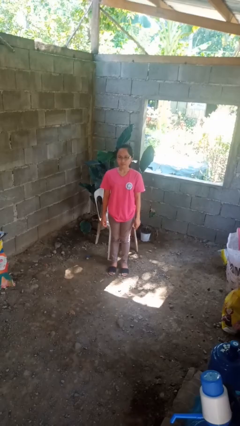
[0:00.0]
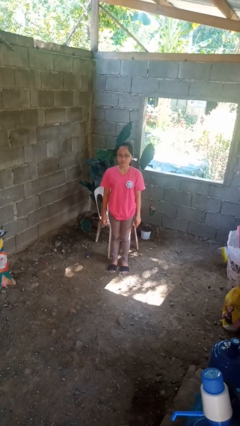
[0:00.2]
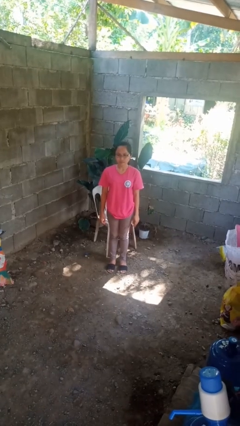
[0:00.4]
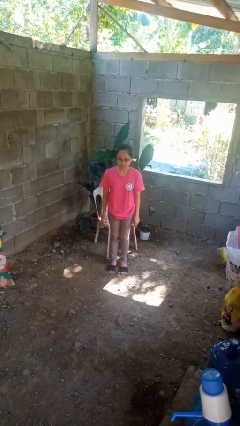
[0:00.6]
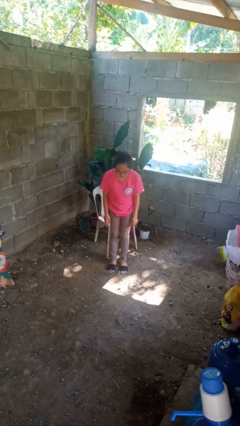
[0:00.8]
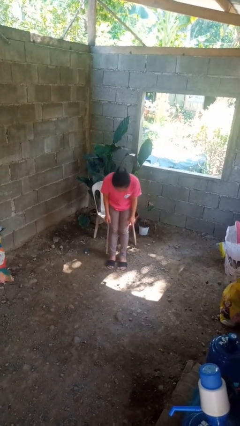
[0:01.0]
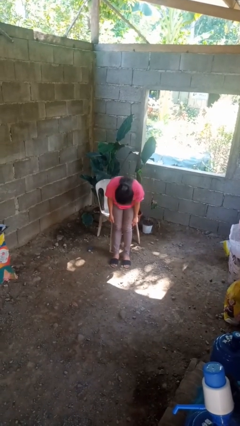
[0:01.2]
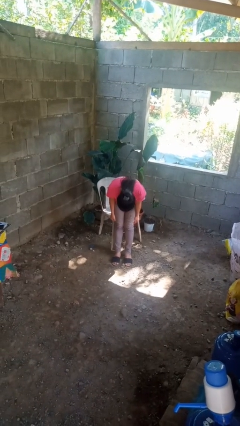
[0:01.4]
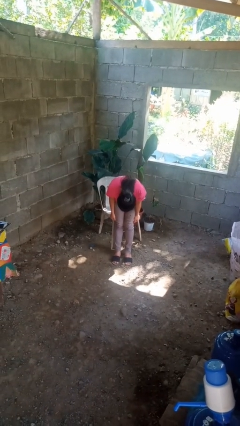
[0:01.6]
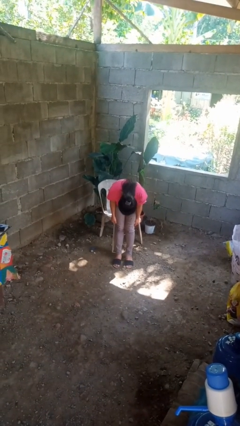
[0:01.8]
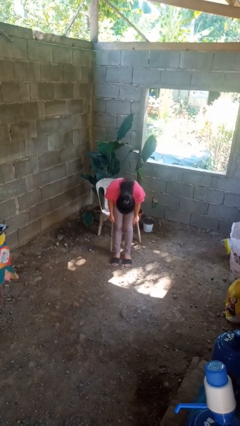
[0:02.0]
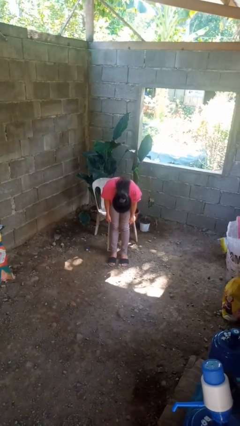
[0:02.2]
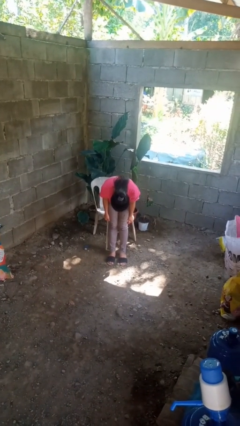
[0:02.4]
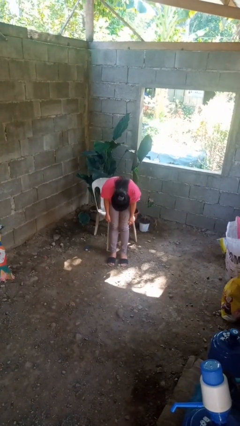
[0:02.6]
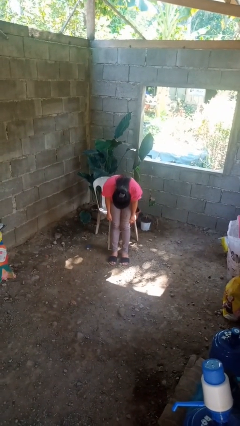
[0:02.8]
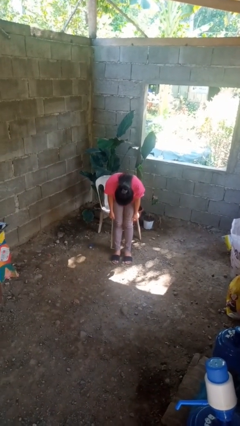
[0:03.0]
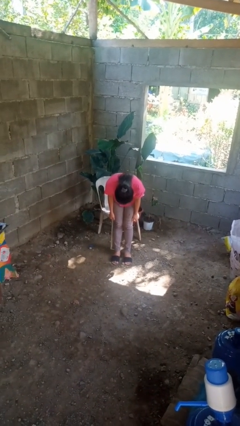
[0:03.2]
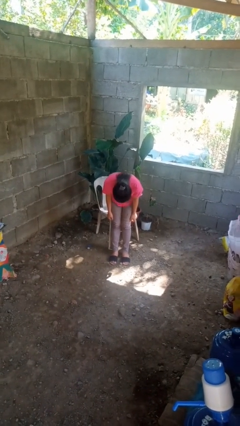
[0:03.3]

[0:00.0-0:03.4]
person bows

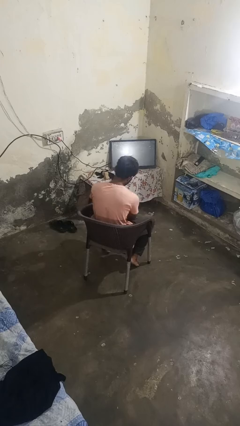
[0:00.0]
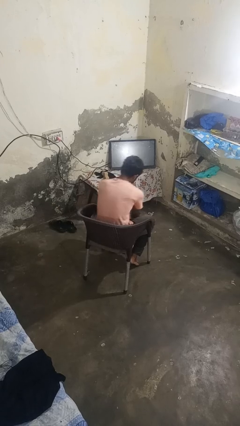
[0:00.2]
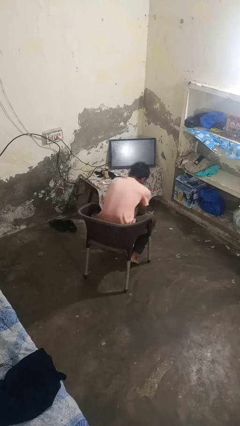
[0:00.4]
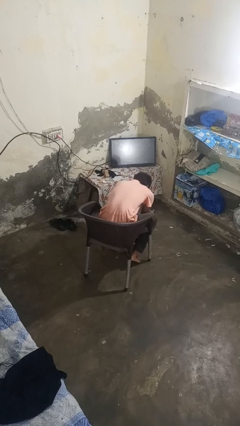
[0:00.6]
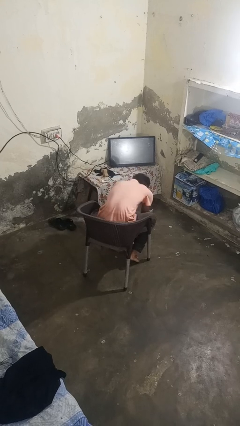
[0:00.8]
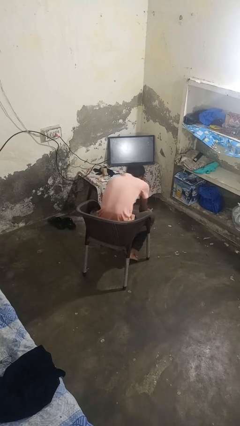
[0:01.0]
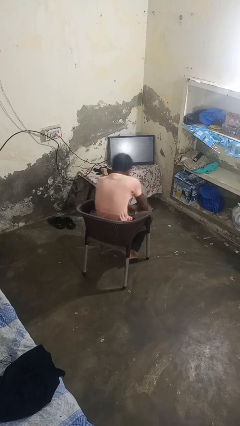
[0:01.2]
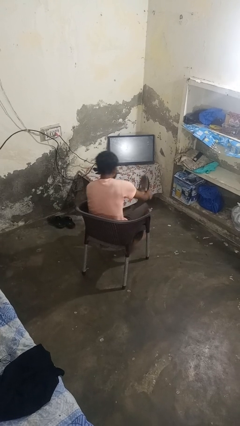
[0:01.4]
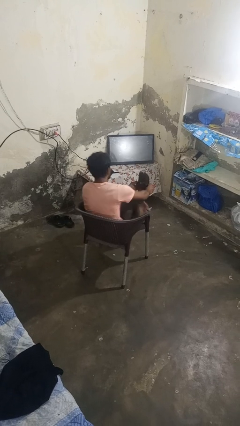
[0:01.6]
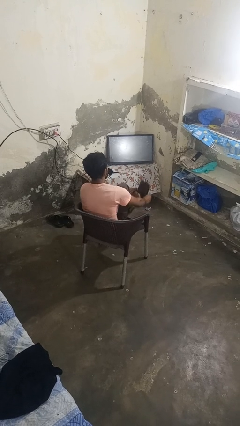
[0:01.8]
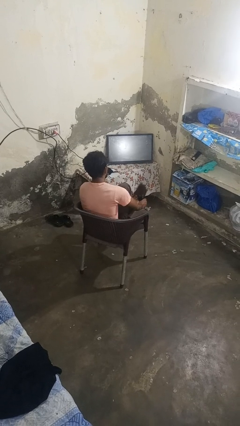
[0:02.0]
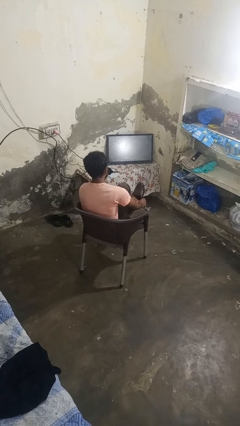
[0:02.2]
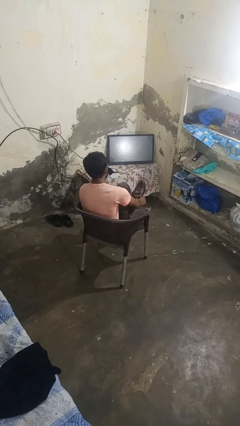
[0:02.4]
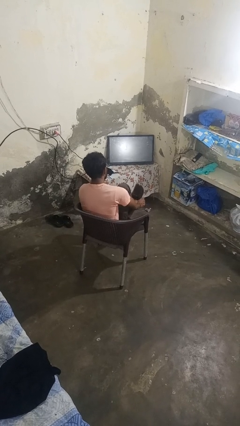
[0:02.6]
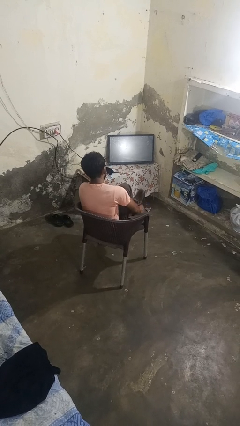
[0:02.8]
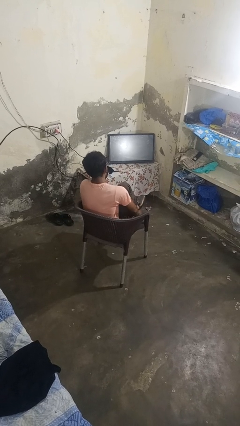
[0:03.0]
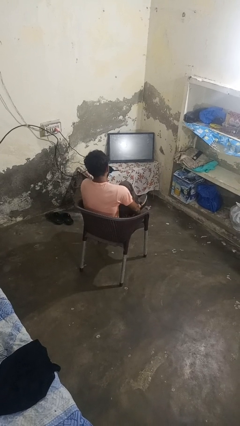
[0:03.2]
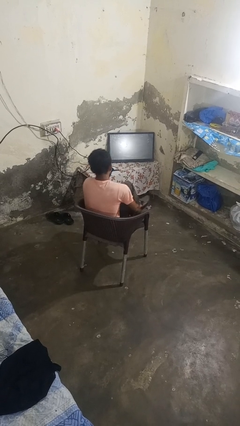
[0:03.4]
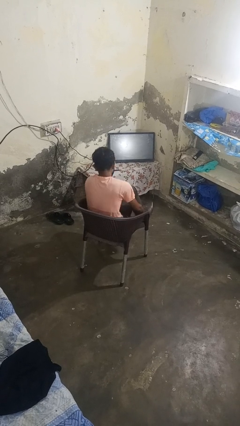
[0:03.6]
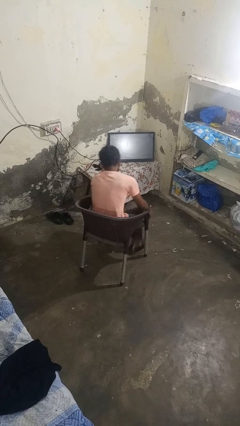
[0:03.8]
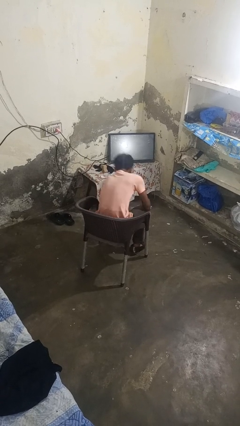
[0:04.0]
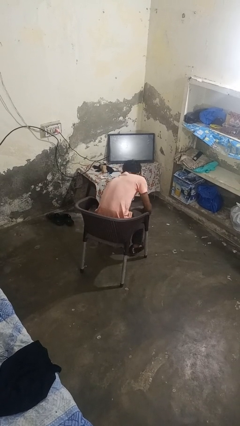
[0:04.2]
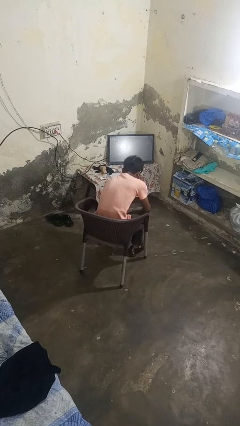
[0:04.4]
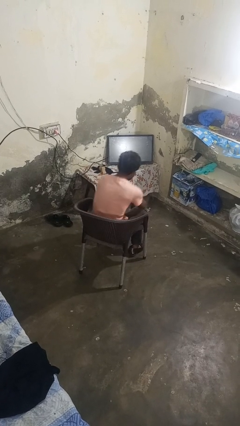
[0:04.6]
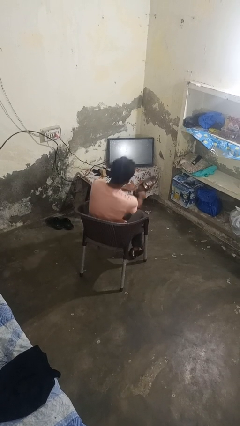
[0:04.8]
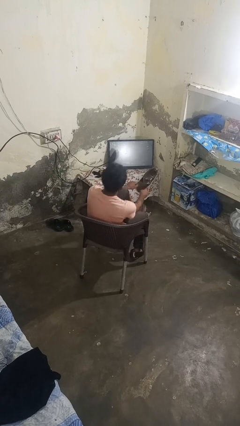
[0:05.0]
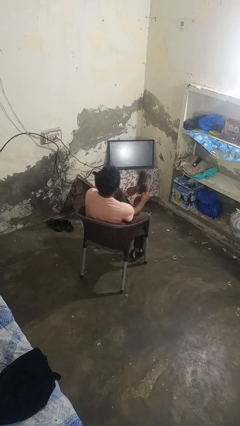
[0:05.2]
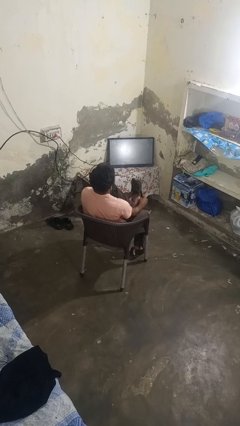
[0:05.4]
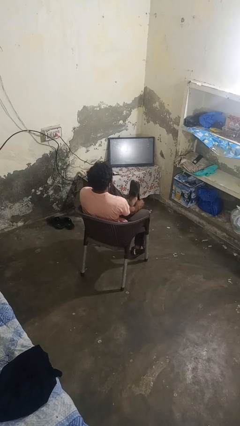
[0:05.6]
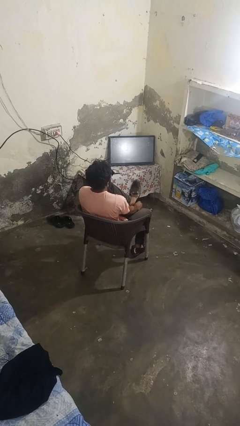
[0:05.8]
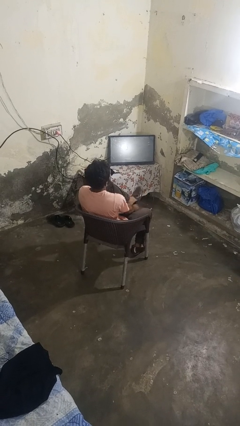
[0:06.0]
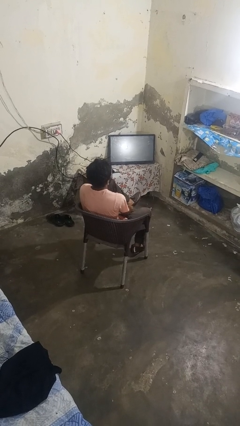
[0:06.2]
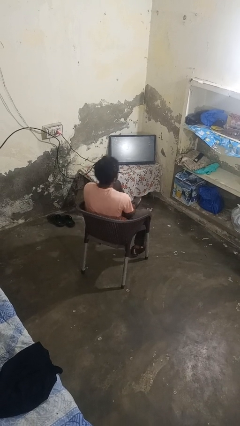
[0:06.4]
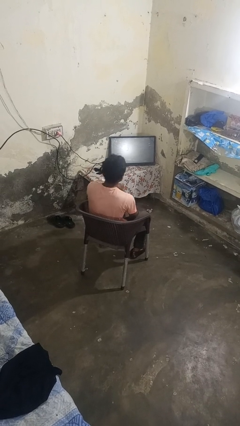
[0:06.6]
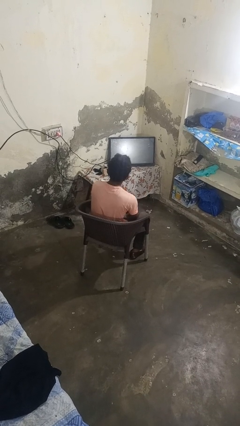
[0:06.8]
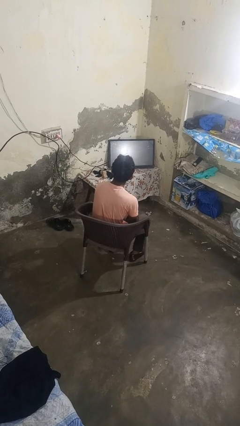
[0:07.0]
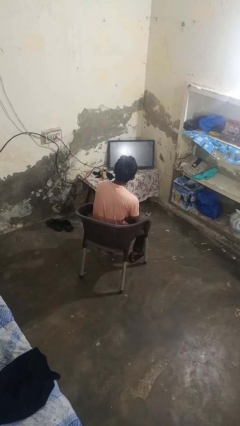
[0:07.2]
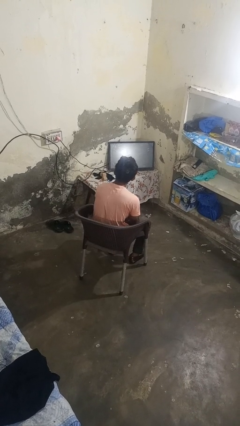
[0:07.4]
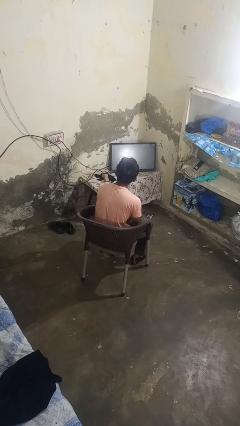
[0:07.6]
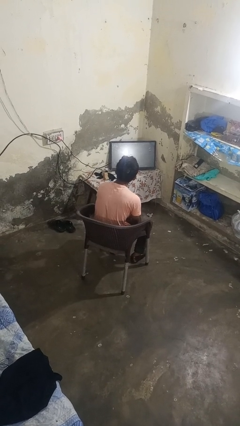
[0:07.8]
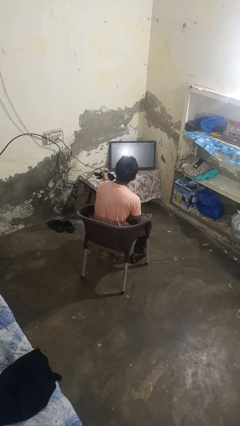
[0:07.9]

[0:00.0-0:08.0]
person puts on shoes

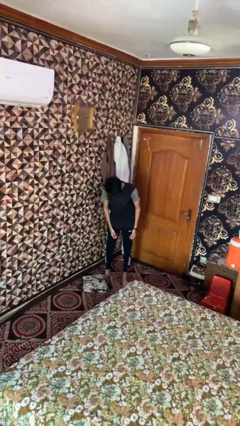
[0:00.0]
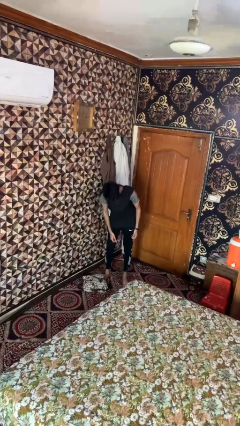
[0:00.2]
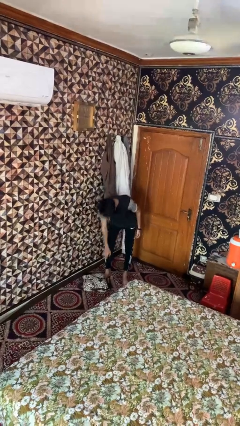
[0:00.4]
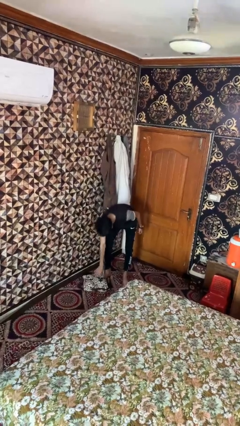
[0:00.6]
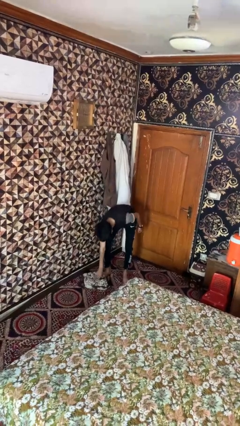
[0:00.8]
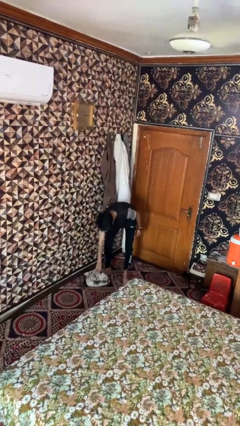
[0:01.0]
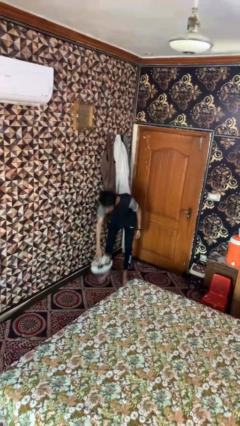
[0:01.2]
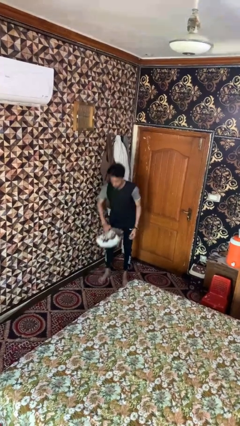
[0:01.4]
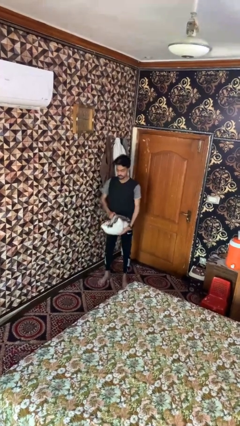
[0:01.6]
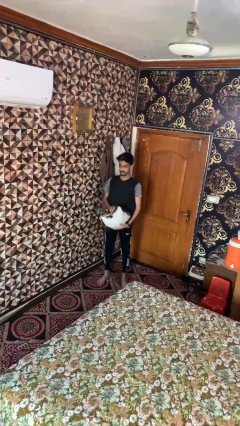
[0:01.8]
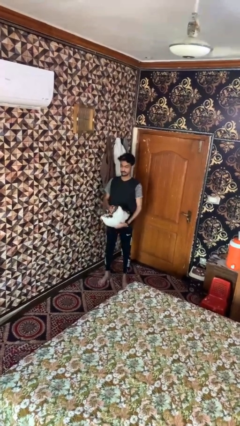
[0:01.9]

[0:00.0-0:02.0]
person picks up object from floor

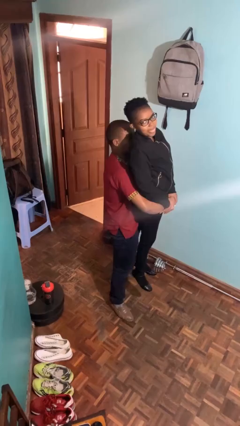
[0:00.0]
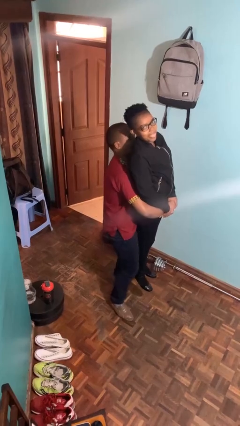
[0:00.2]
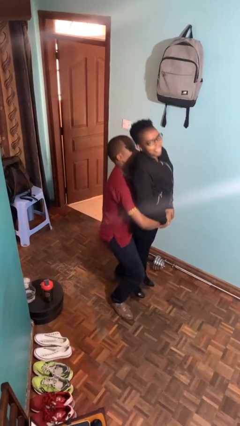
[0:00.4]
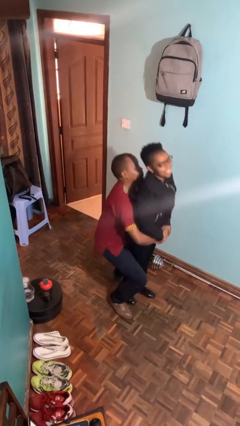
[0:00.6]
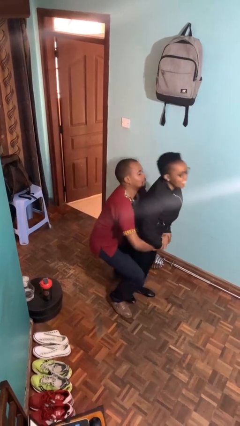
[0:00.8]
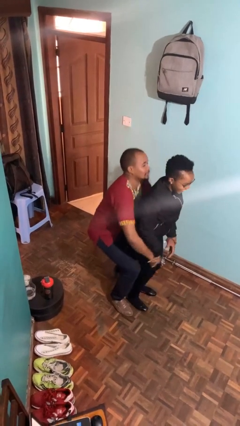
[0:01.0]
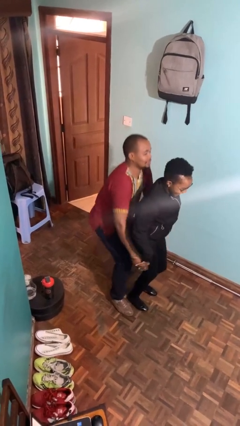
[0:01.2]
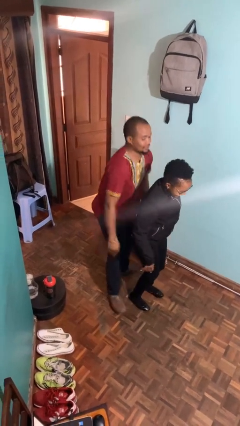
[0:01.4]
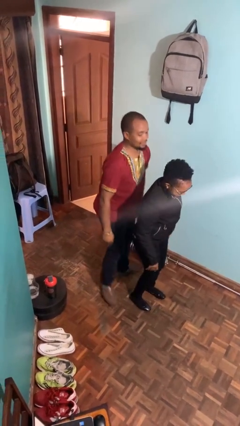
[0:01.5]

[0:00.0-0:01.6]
person puts down person

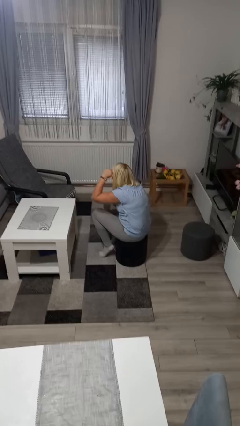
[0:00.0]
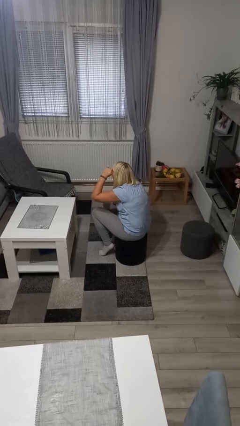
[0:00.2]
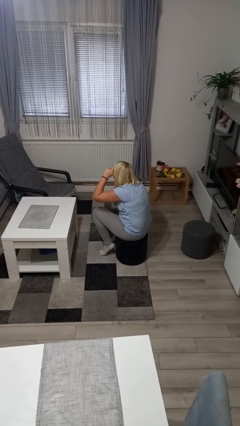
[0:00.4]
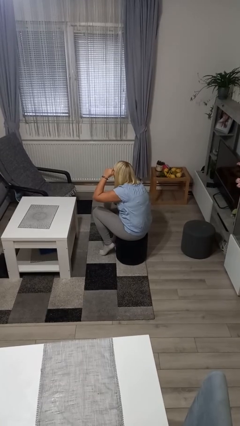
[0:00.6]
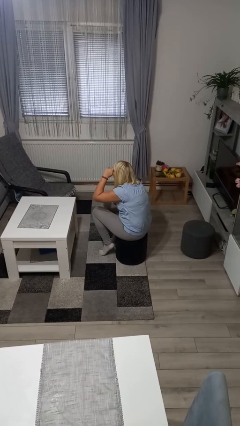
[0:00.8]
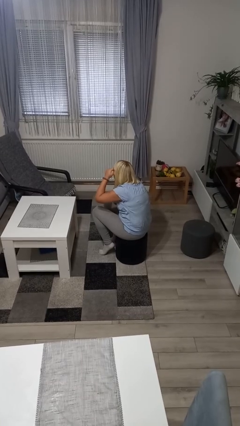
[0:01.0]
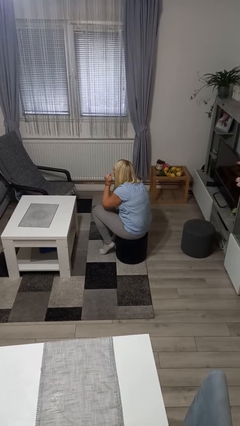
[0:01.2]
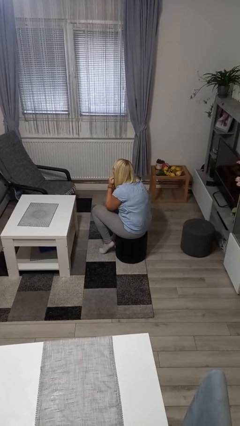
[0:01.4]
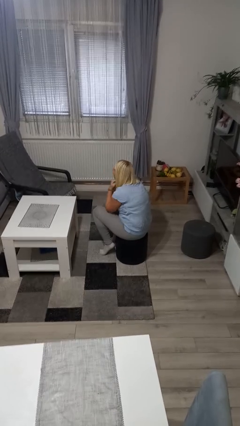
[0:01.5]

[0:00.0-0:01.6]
person rubs eyes

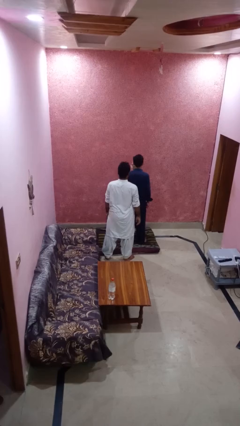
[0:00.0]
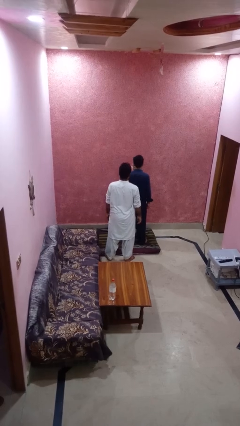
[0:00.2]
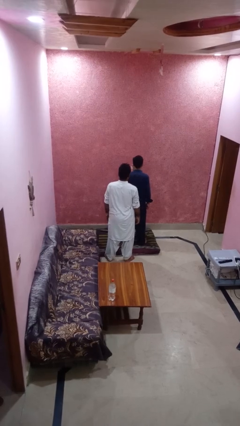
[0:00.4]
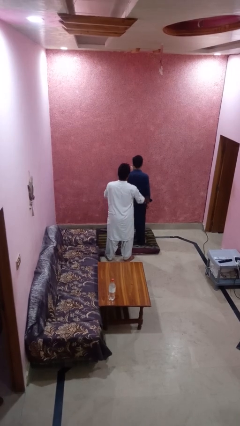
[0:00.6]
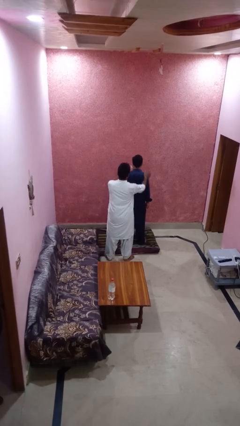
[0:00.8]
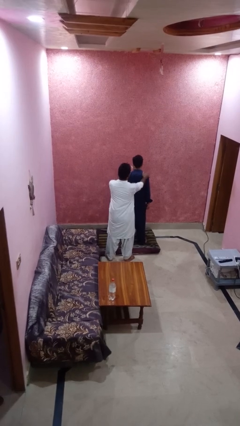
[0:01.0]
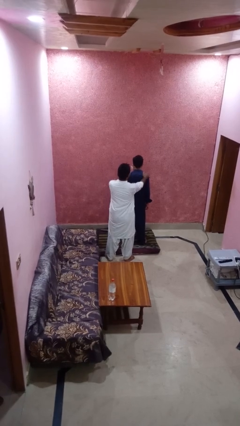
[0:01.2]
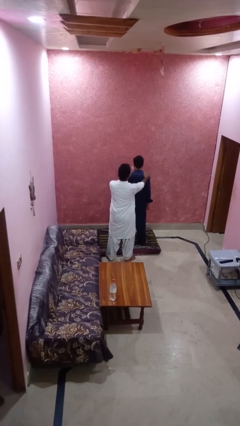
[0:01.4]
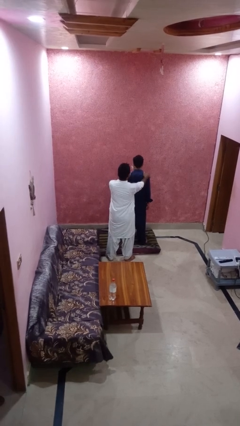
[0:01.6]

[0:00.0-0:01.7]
person grabs person by shoulder
